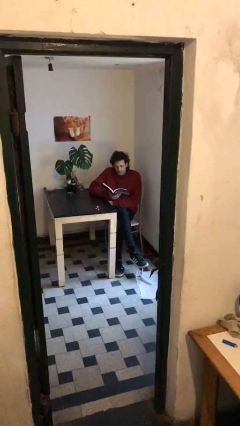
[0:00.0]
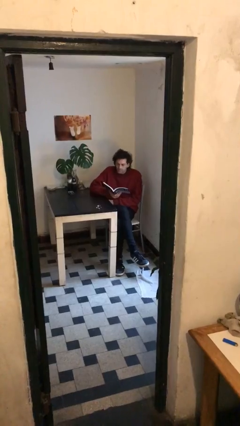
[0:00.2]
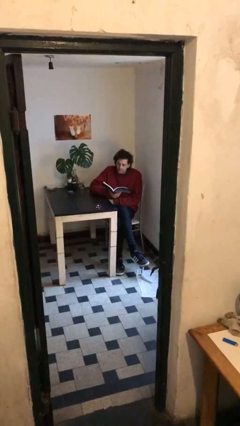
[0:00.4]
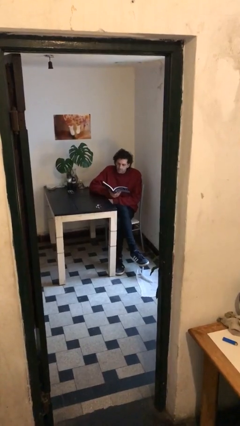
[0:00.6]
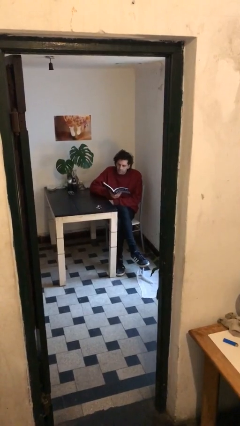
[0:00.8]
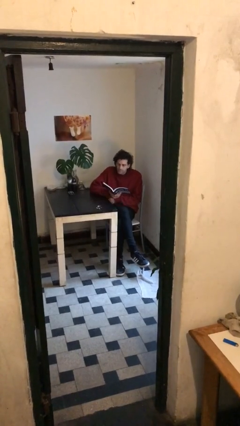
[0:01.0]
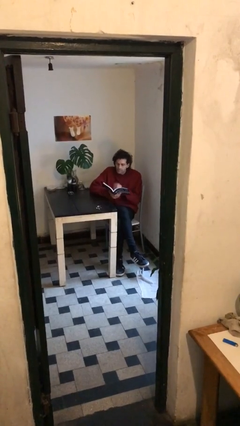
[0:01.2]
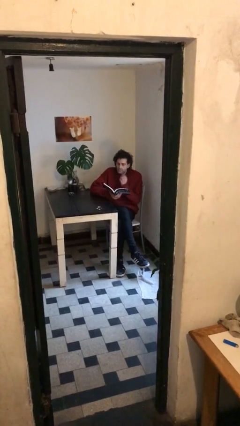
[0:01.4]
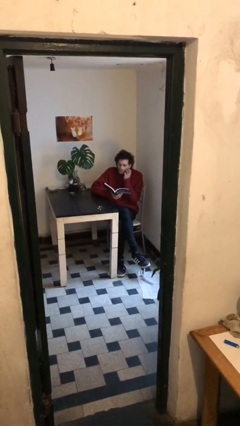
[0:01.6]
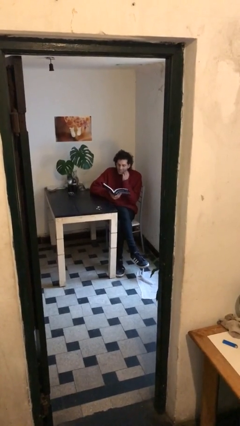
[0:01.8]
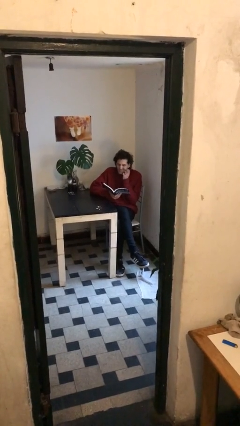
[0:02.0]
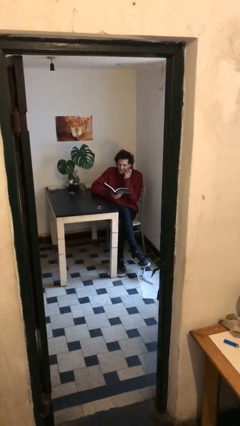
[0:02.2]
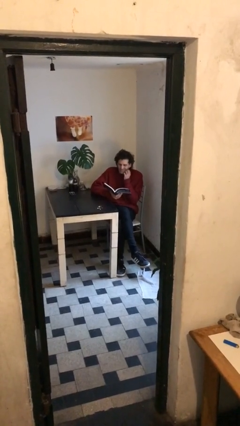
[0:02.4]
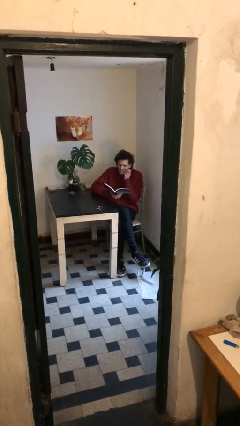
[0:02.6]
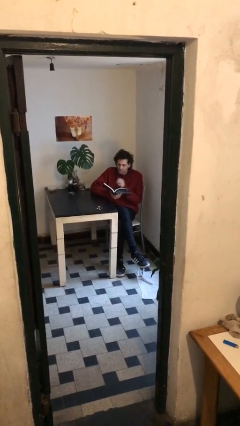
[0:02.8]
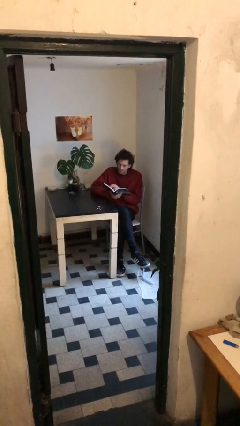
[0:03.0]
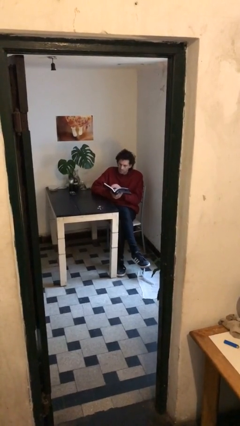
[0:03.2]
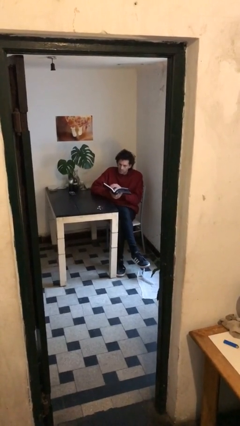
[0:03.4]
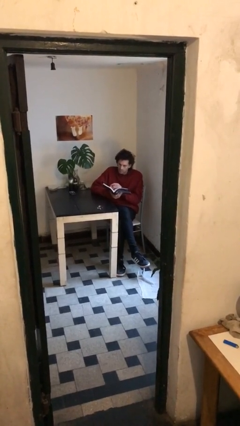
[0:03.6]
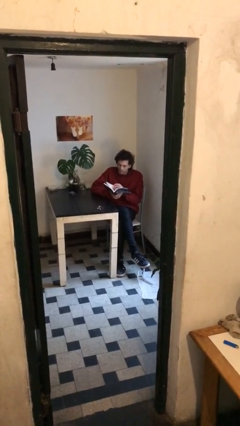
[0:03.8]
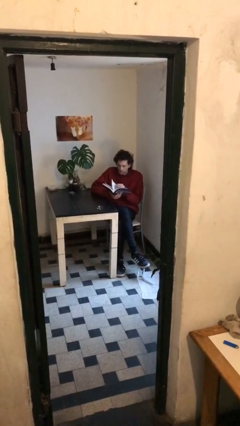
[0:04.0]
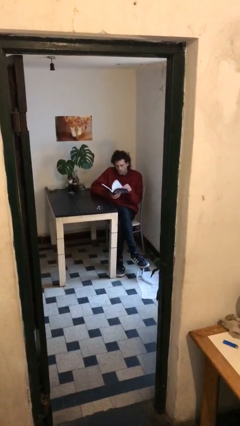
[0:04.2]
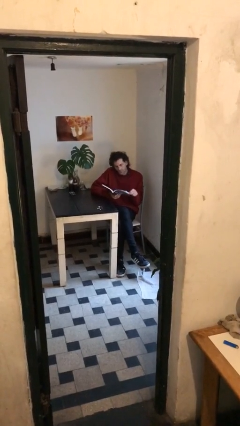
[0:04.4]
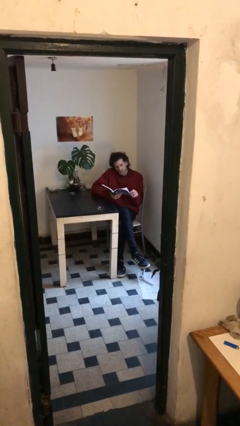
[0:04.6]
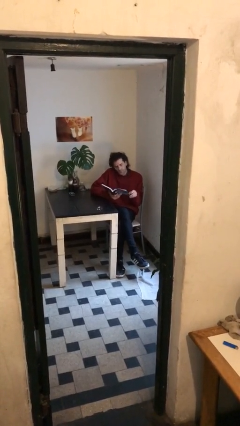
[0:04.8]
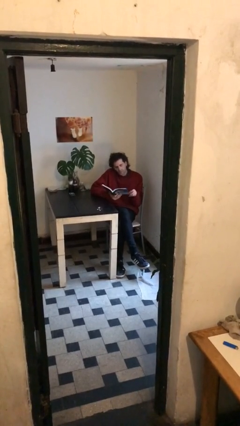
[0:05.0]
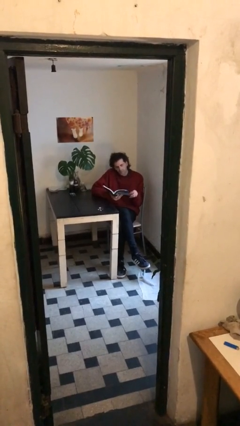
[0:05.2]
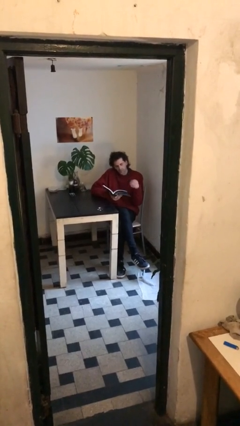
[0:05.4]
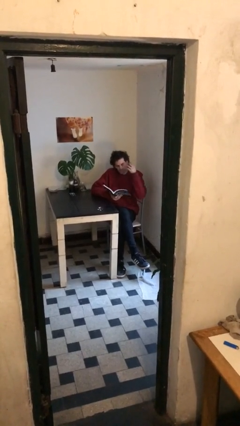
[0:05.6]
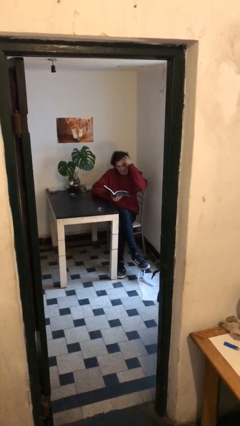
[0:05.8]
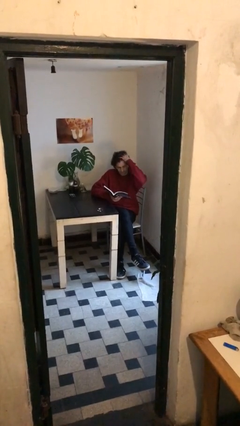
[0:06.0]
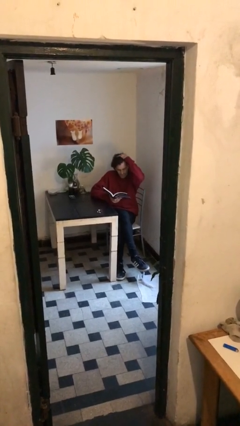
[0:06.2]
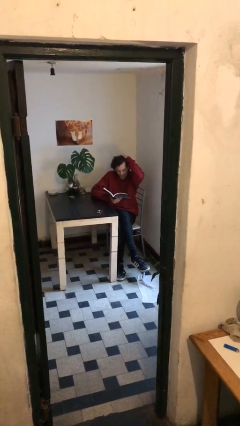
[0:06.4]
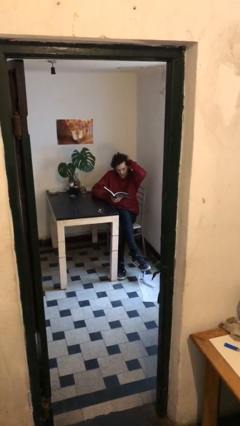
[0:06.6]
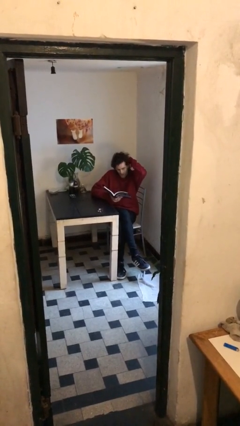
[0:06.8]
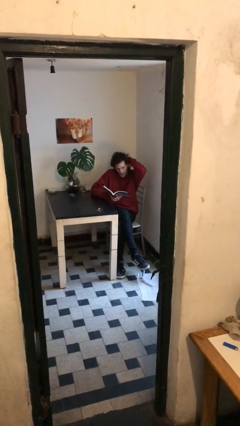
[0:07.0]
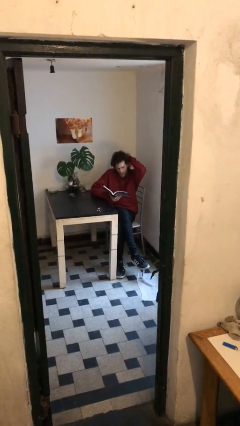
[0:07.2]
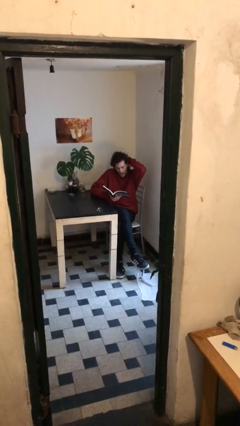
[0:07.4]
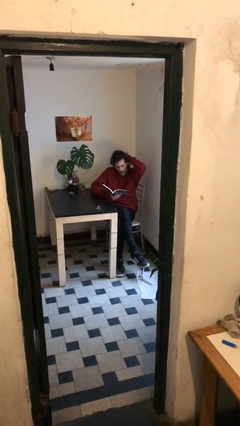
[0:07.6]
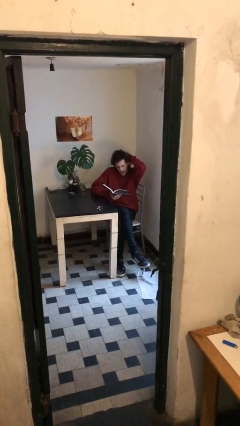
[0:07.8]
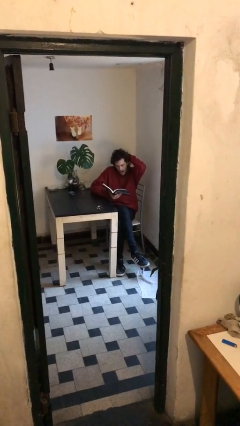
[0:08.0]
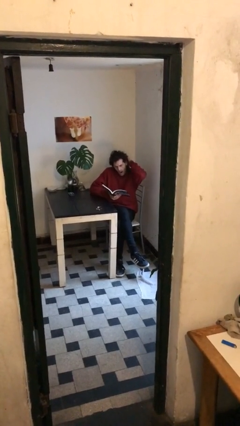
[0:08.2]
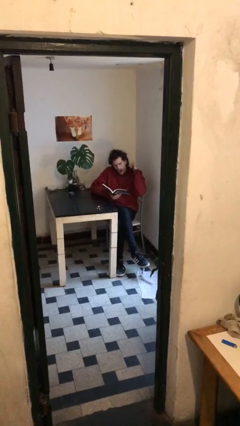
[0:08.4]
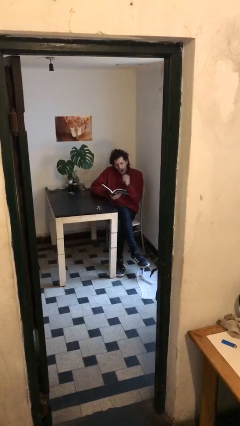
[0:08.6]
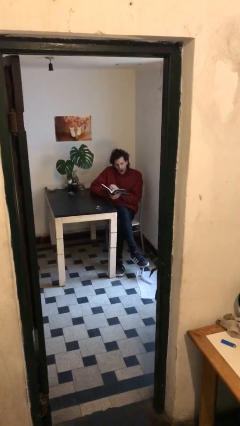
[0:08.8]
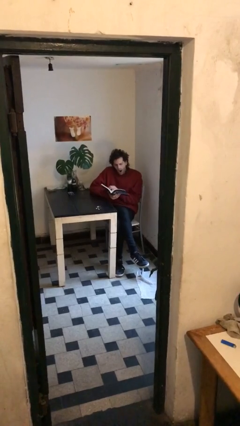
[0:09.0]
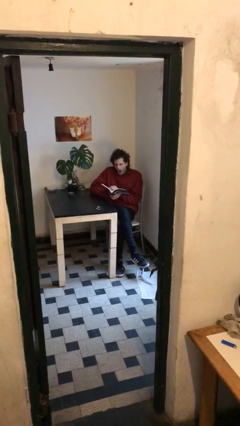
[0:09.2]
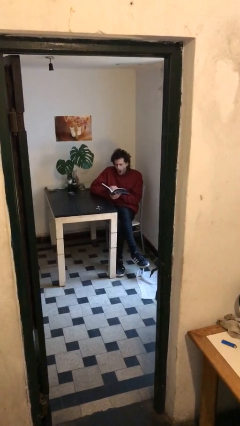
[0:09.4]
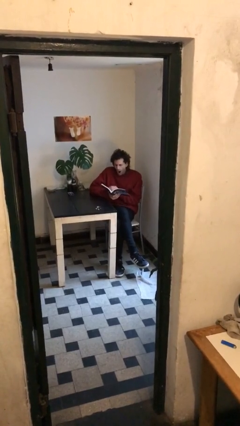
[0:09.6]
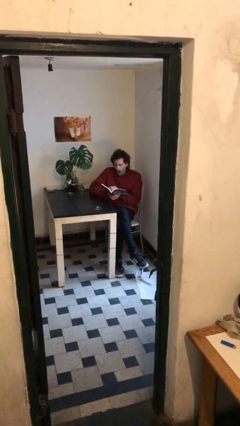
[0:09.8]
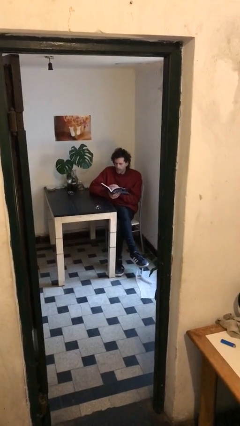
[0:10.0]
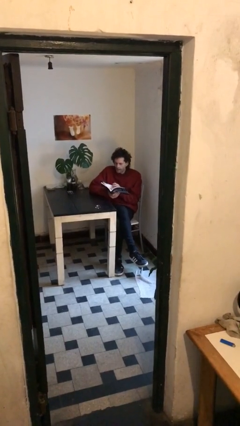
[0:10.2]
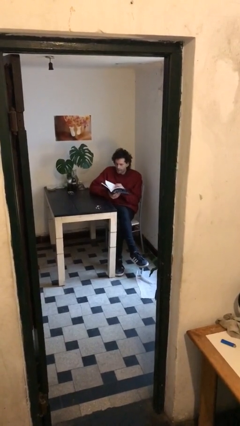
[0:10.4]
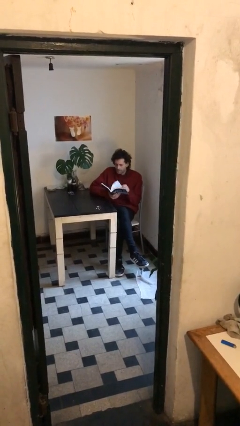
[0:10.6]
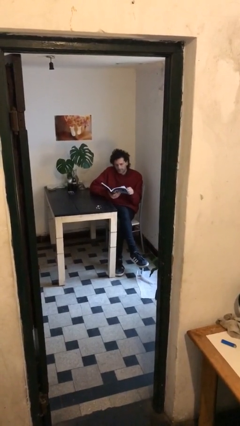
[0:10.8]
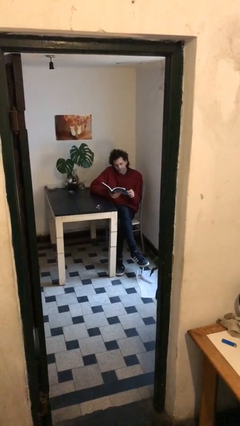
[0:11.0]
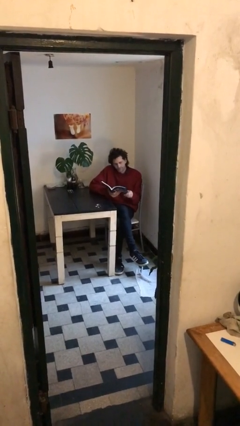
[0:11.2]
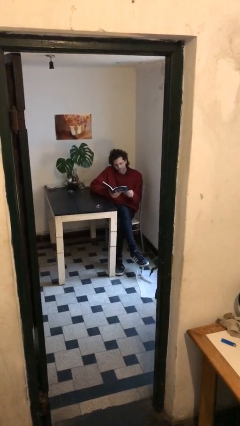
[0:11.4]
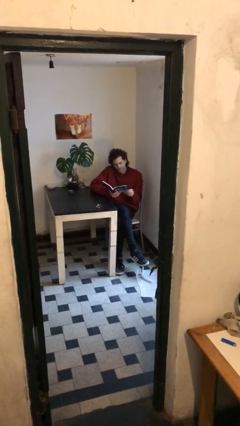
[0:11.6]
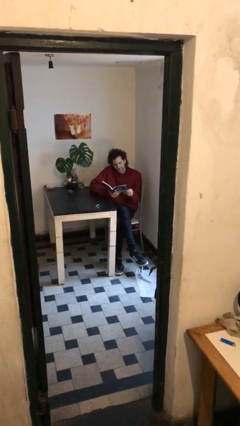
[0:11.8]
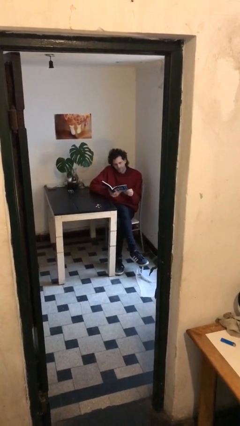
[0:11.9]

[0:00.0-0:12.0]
person reads document

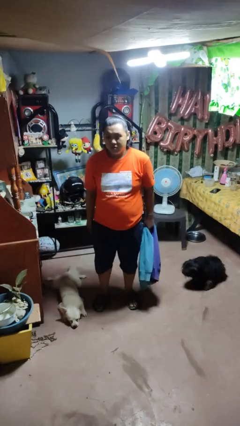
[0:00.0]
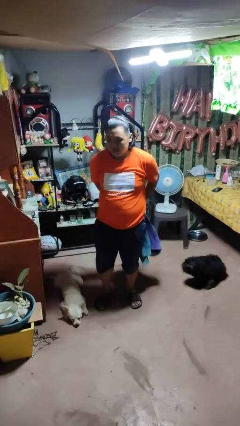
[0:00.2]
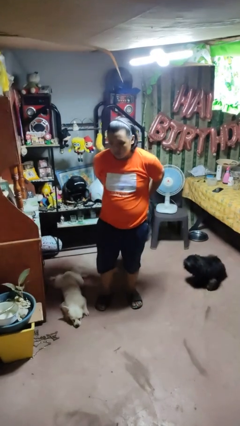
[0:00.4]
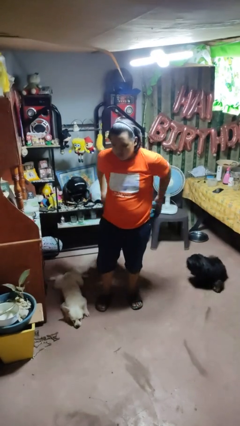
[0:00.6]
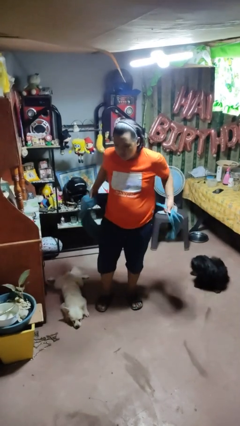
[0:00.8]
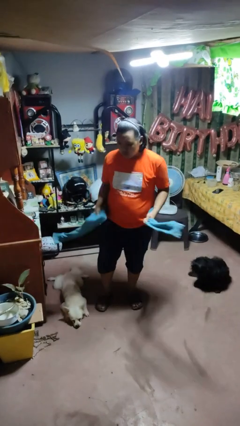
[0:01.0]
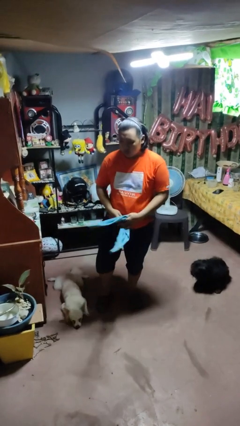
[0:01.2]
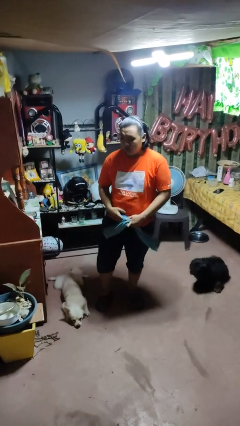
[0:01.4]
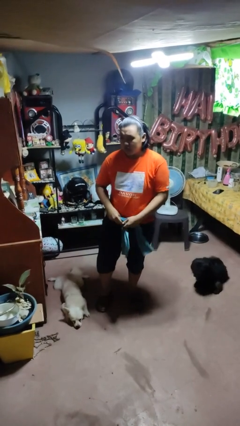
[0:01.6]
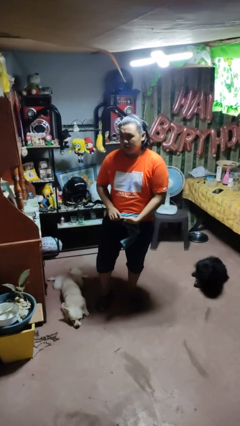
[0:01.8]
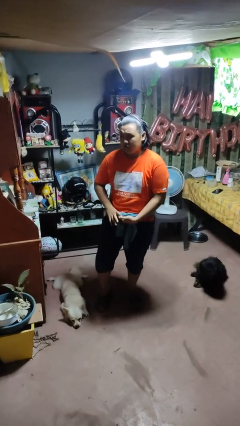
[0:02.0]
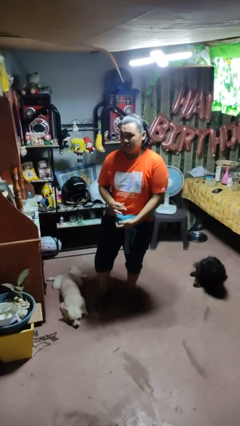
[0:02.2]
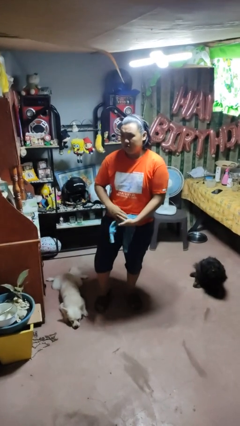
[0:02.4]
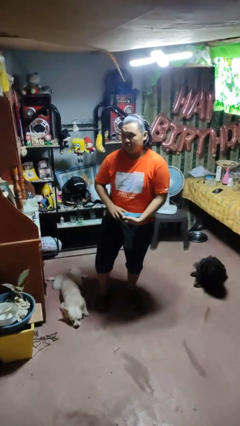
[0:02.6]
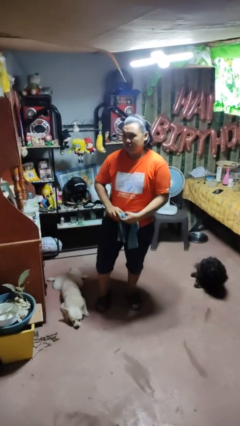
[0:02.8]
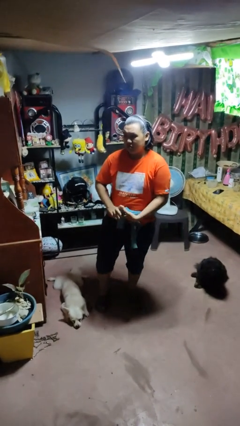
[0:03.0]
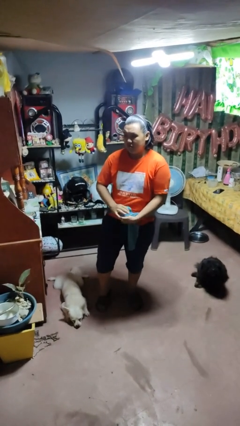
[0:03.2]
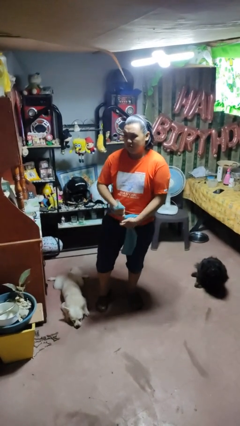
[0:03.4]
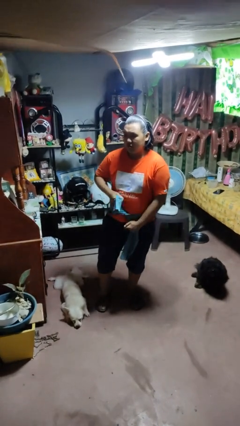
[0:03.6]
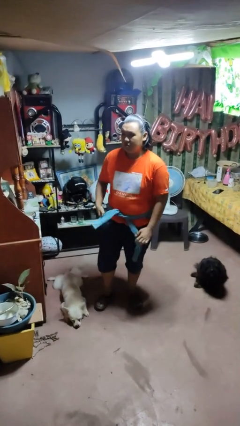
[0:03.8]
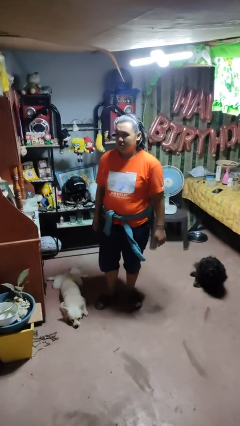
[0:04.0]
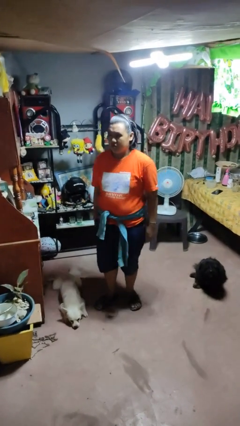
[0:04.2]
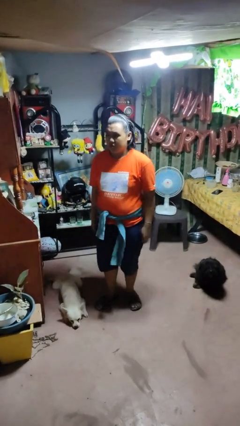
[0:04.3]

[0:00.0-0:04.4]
person ties jacket around waist

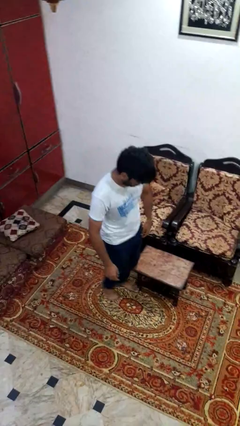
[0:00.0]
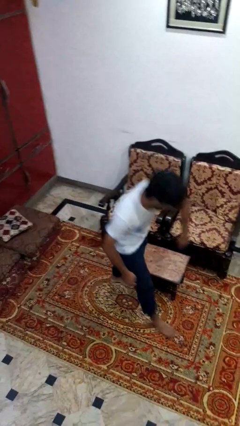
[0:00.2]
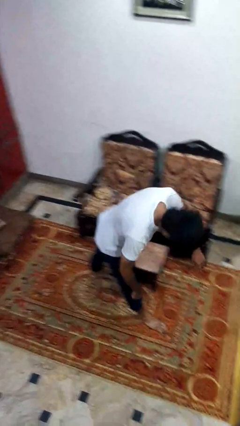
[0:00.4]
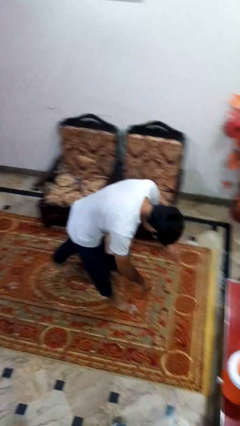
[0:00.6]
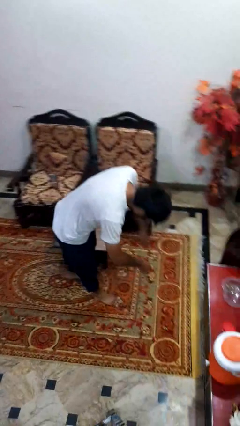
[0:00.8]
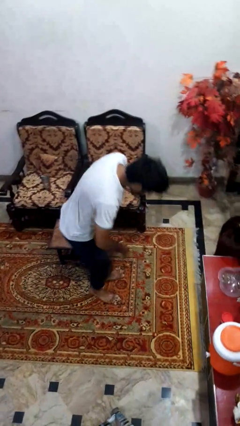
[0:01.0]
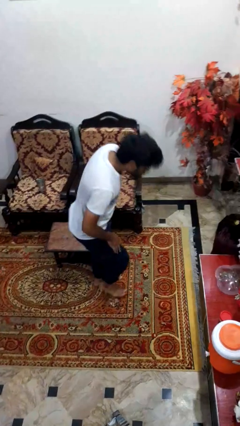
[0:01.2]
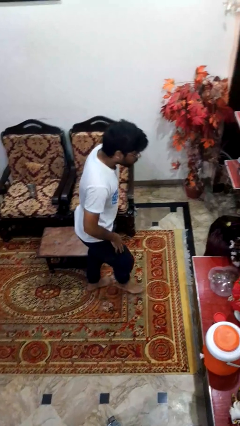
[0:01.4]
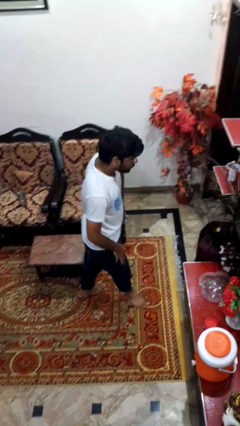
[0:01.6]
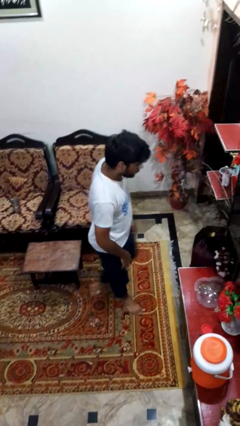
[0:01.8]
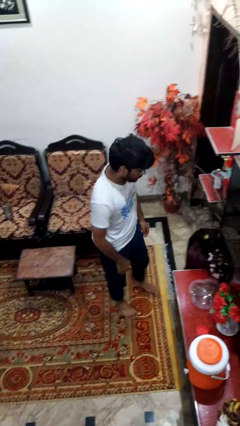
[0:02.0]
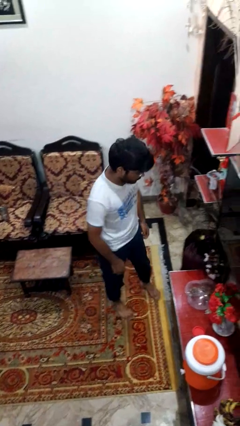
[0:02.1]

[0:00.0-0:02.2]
person bumps into table
